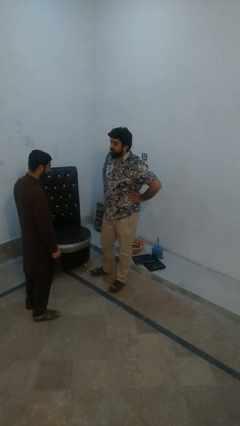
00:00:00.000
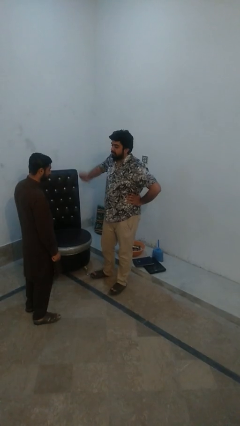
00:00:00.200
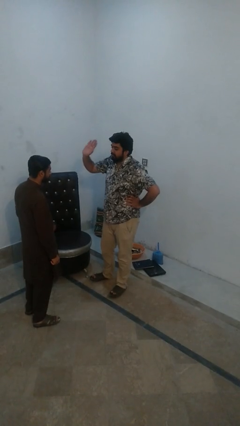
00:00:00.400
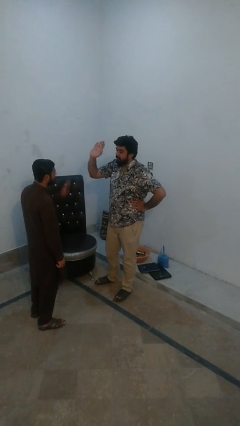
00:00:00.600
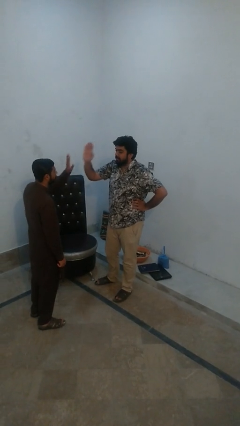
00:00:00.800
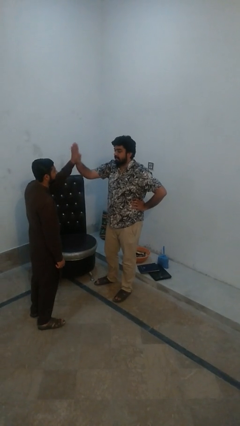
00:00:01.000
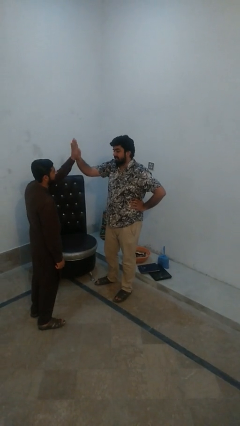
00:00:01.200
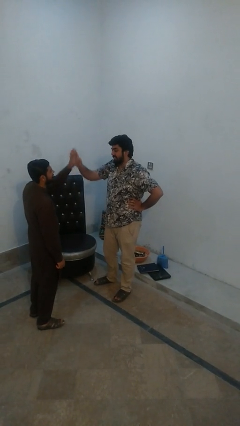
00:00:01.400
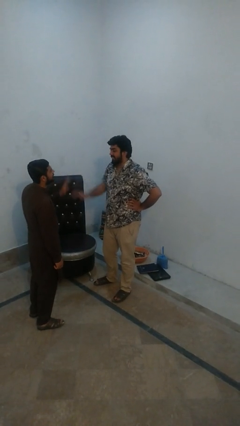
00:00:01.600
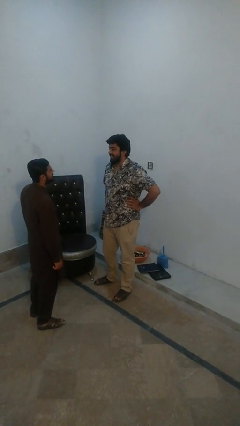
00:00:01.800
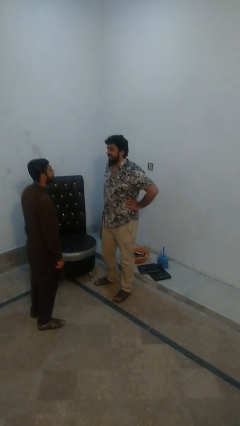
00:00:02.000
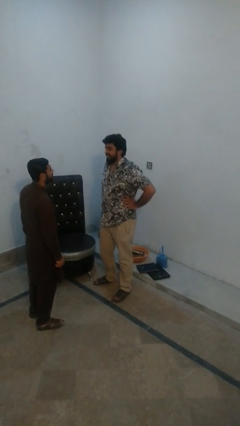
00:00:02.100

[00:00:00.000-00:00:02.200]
person highfives hand

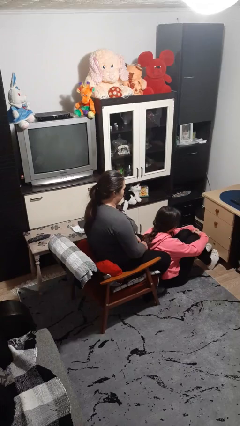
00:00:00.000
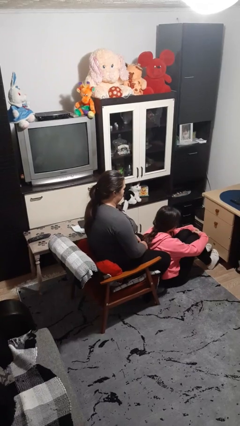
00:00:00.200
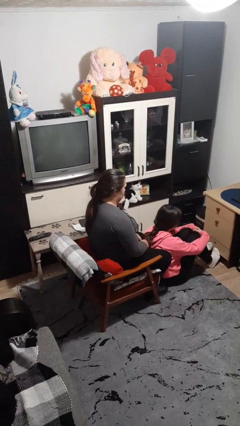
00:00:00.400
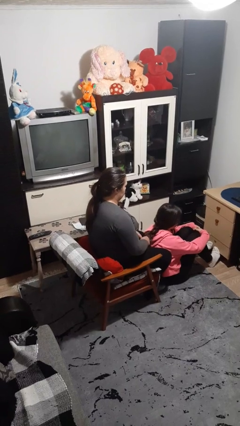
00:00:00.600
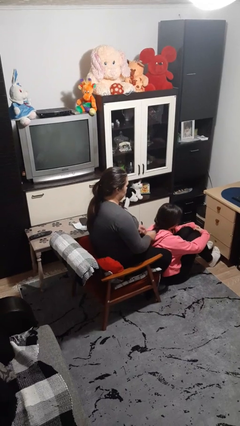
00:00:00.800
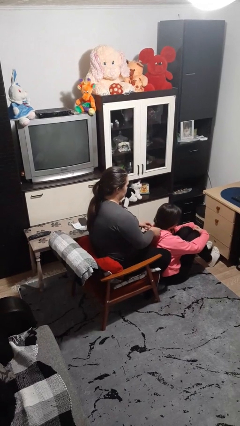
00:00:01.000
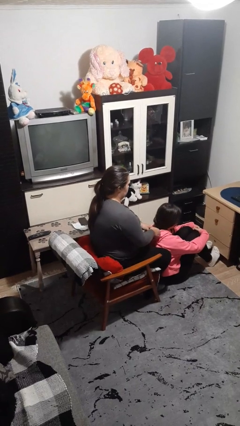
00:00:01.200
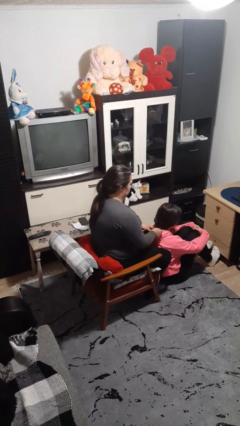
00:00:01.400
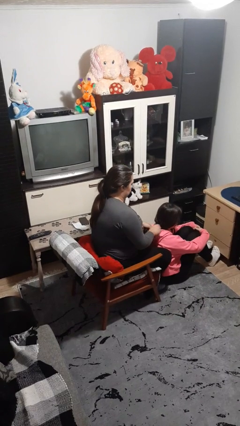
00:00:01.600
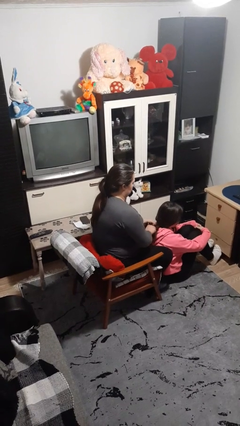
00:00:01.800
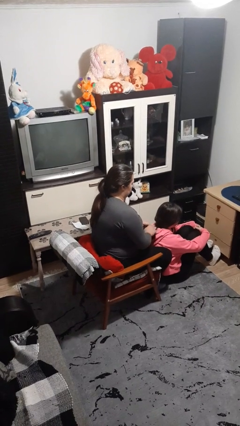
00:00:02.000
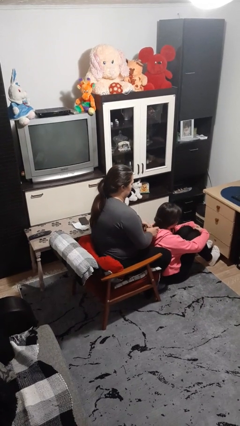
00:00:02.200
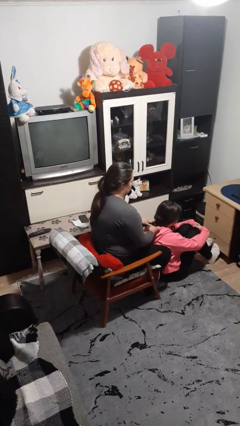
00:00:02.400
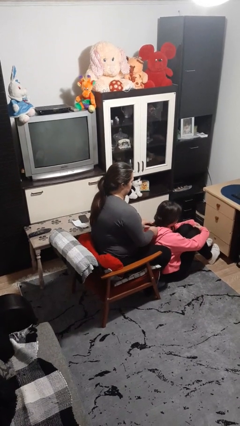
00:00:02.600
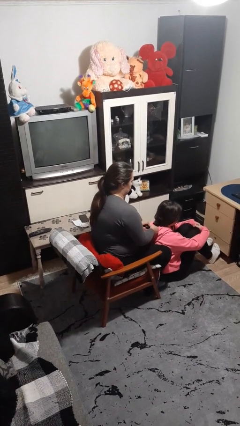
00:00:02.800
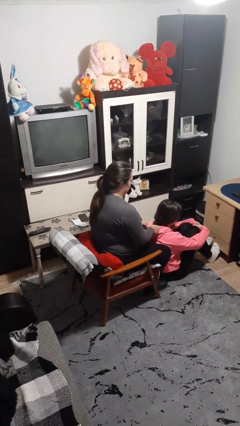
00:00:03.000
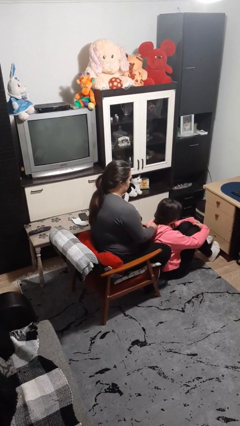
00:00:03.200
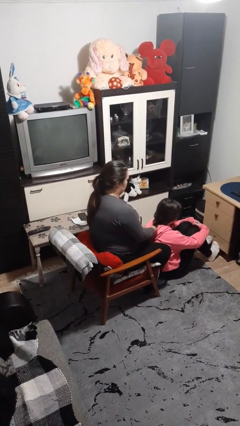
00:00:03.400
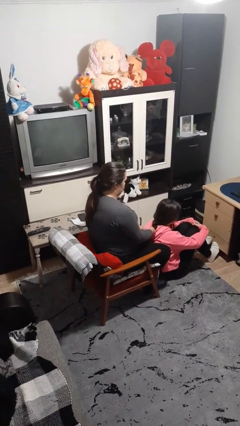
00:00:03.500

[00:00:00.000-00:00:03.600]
person braids hair of person

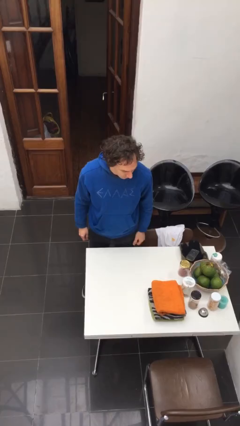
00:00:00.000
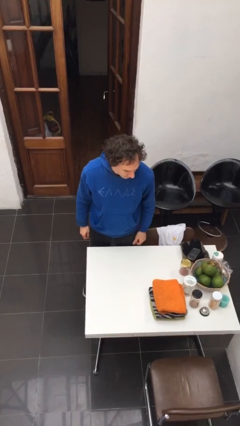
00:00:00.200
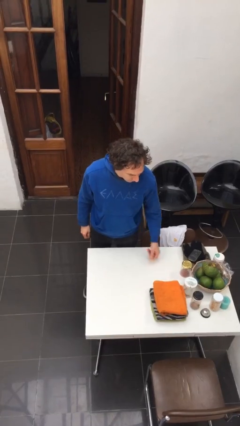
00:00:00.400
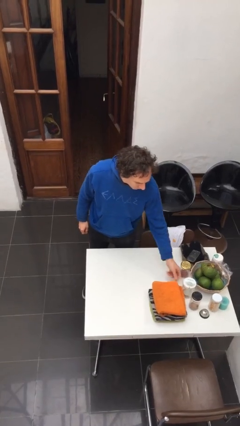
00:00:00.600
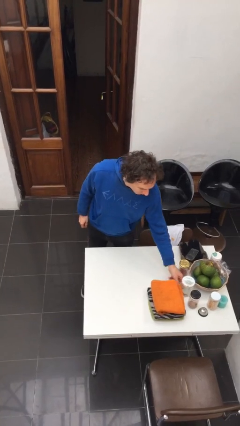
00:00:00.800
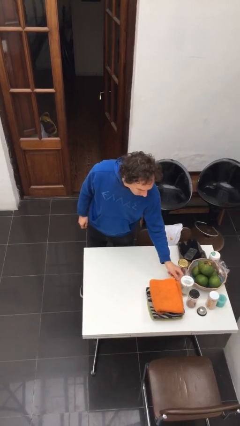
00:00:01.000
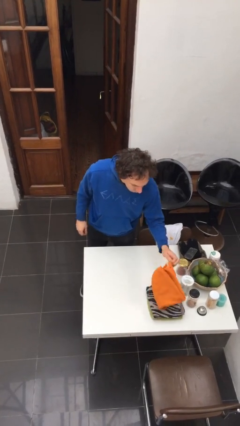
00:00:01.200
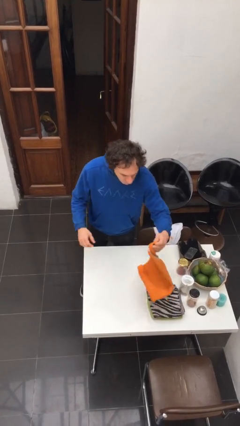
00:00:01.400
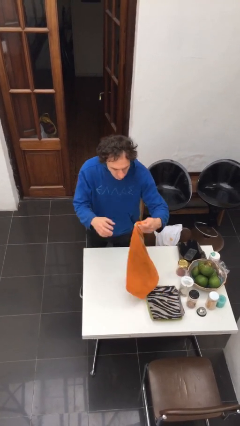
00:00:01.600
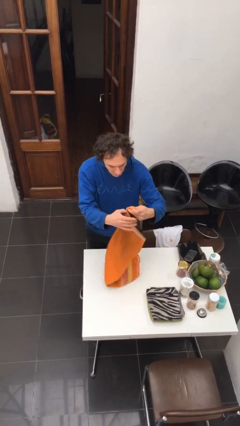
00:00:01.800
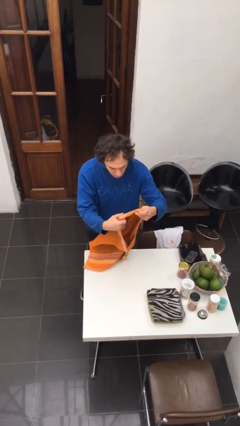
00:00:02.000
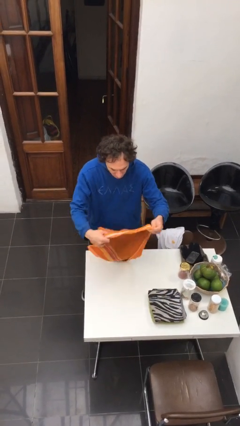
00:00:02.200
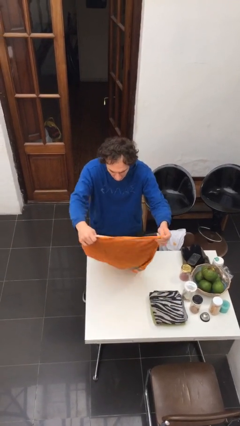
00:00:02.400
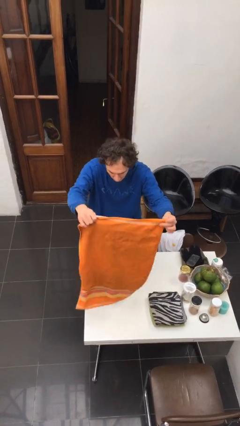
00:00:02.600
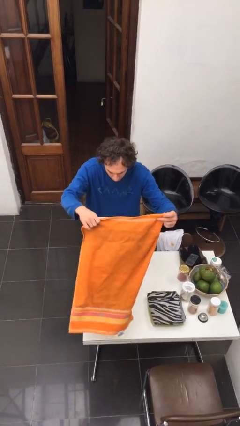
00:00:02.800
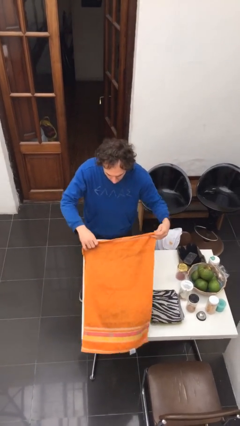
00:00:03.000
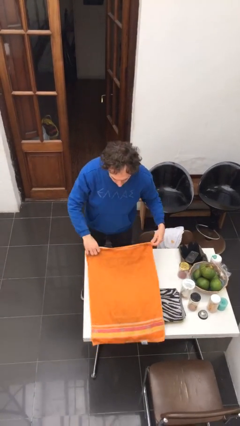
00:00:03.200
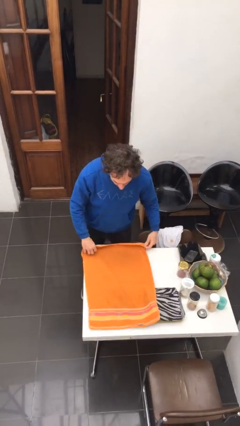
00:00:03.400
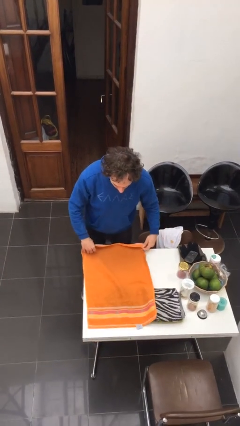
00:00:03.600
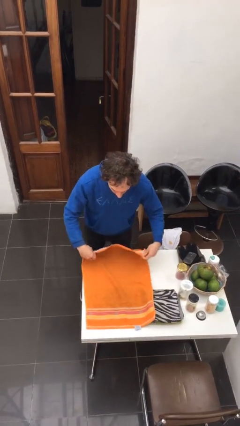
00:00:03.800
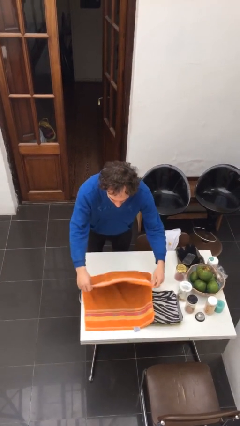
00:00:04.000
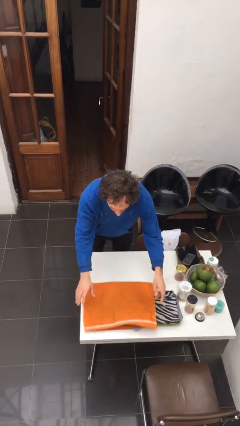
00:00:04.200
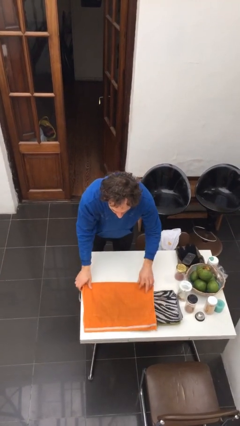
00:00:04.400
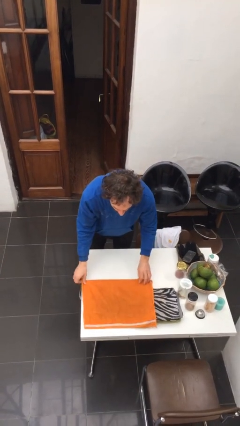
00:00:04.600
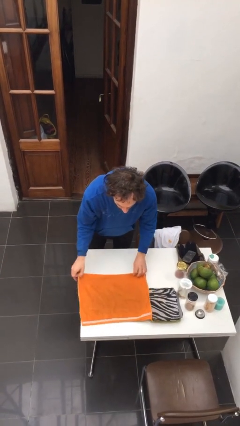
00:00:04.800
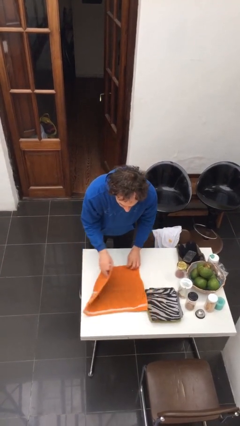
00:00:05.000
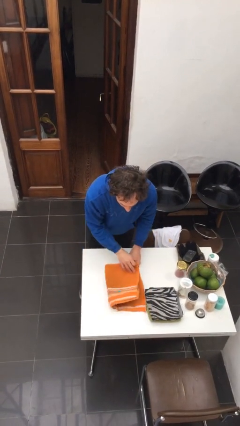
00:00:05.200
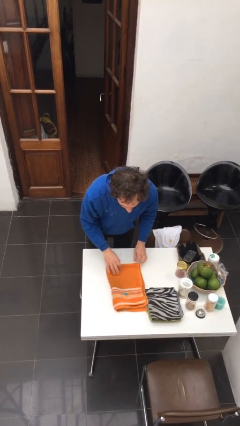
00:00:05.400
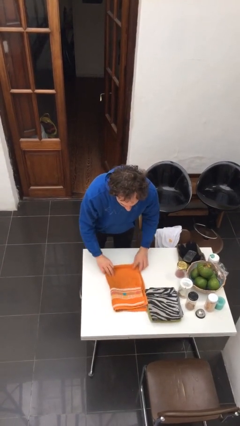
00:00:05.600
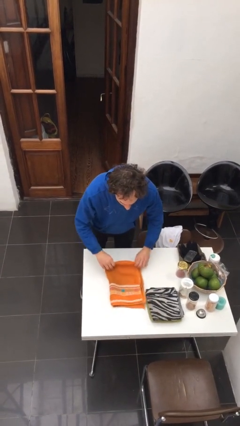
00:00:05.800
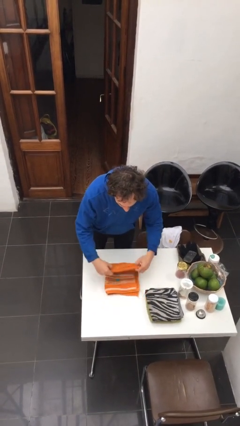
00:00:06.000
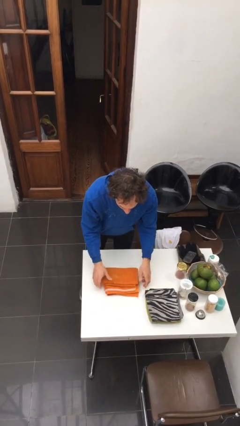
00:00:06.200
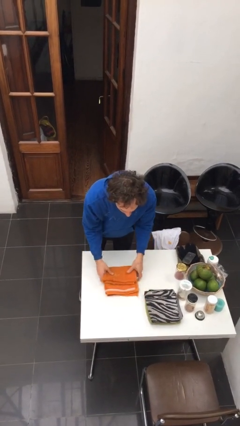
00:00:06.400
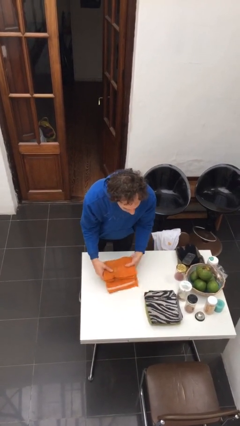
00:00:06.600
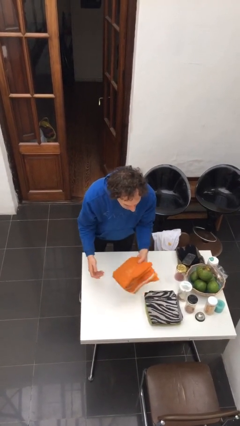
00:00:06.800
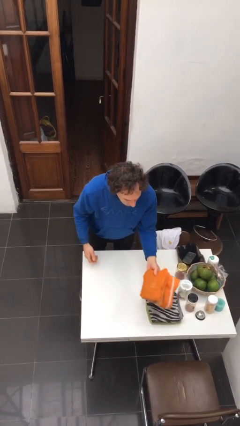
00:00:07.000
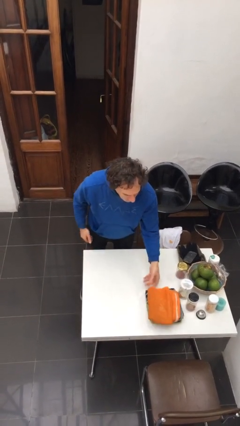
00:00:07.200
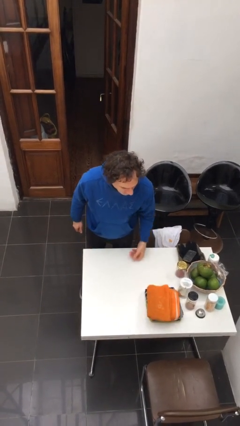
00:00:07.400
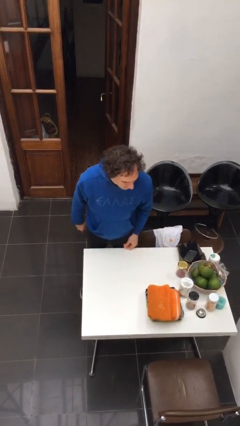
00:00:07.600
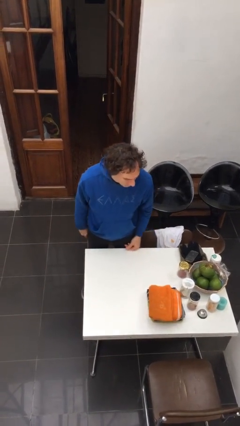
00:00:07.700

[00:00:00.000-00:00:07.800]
person folds towel

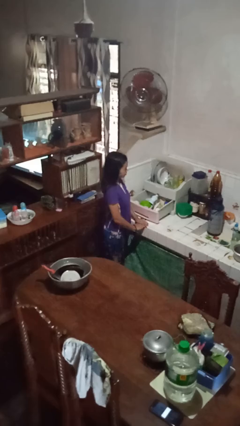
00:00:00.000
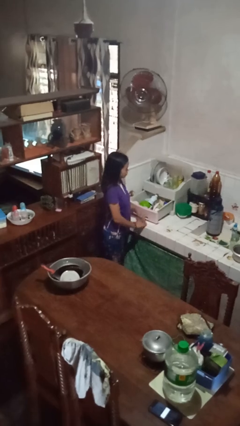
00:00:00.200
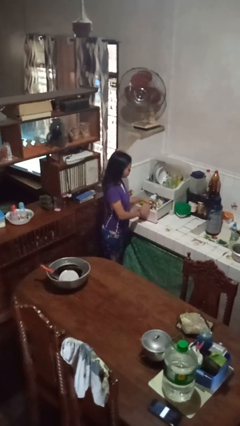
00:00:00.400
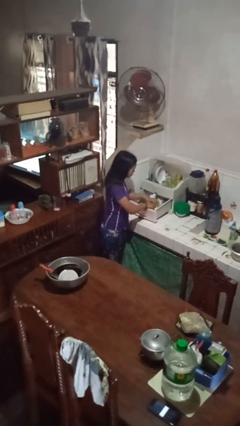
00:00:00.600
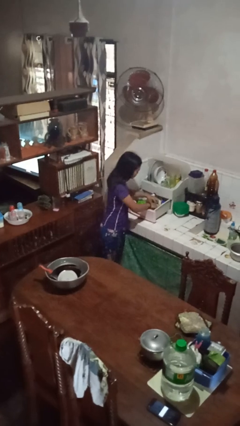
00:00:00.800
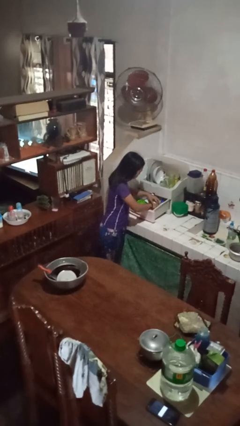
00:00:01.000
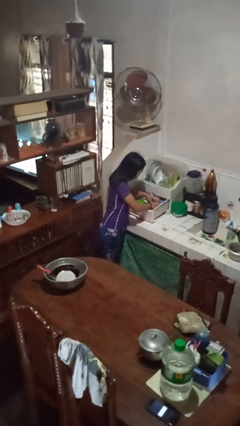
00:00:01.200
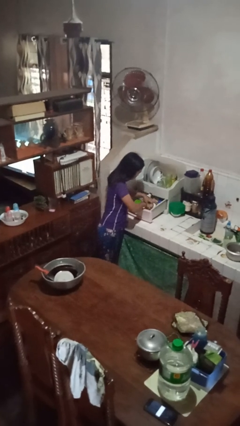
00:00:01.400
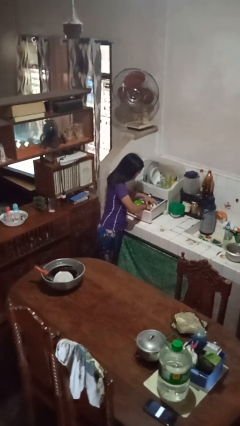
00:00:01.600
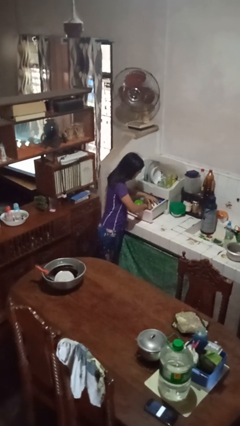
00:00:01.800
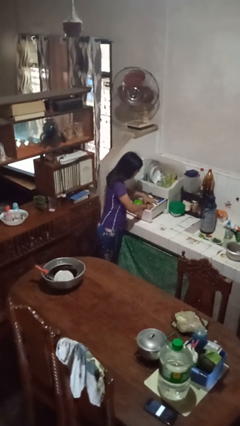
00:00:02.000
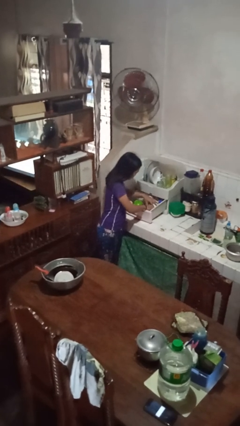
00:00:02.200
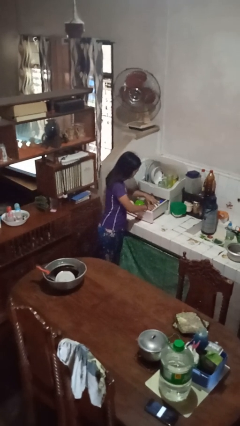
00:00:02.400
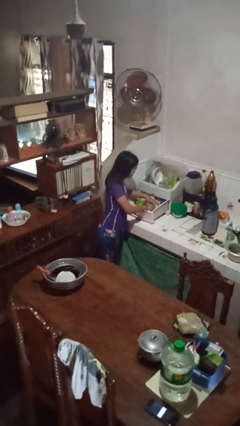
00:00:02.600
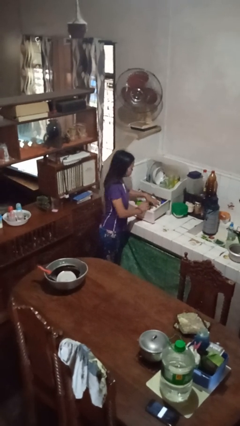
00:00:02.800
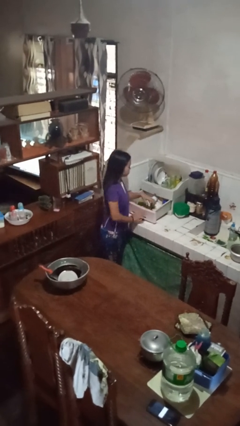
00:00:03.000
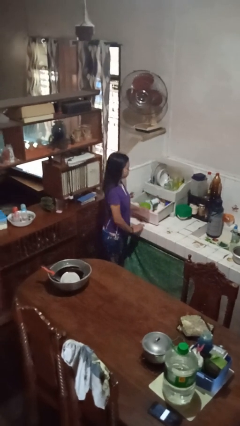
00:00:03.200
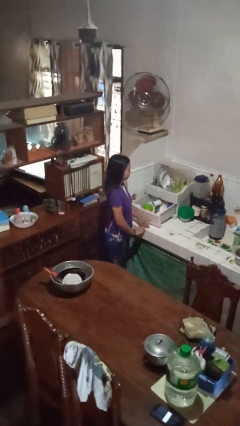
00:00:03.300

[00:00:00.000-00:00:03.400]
person searches in kitchen drawer

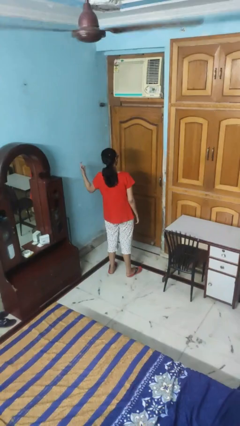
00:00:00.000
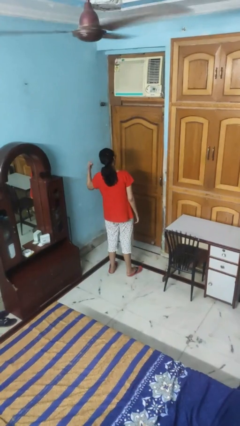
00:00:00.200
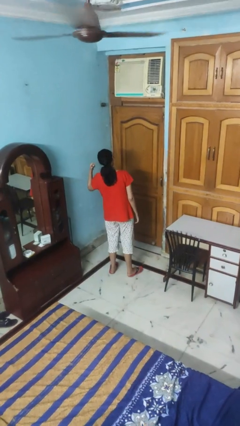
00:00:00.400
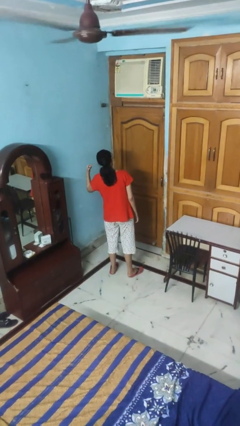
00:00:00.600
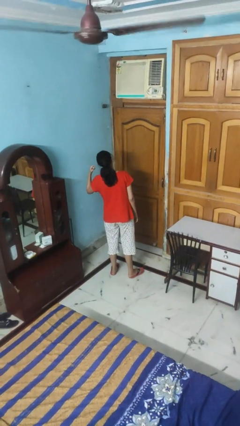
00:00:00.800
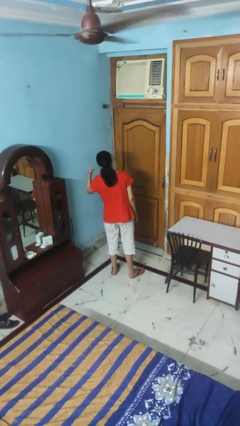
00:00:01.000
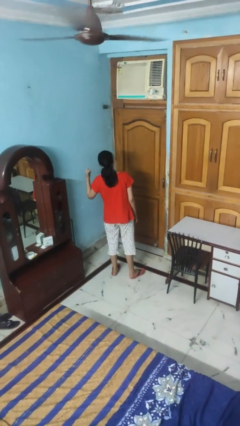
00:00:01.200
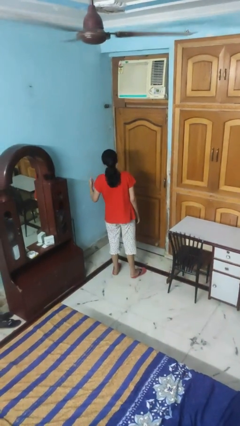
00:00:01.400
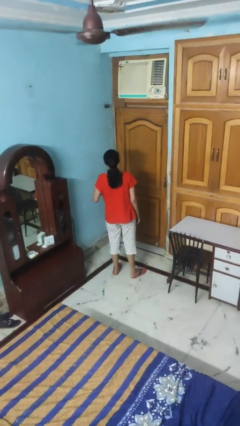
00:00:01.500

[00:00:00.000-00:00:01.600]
person gestures listen closely
